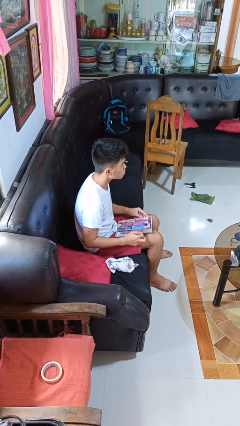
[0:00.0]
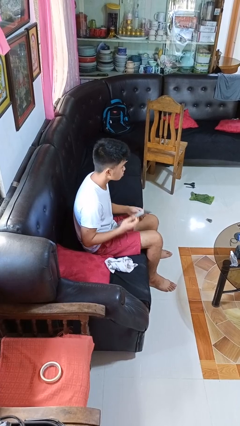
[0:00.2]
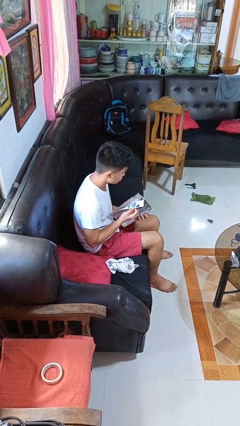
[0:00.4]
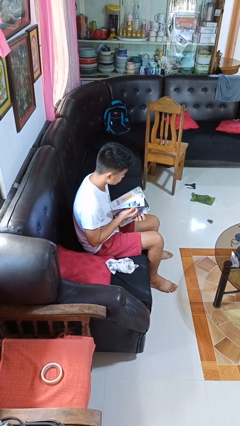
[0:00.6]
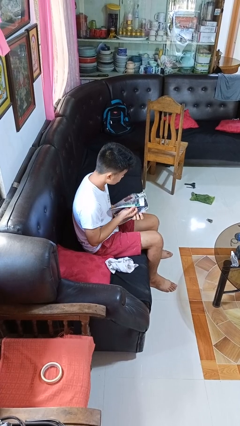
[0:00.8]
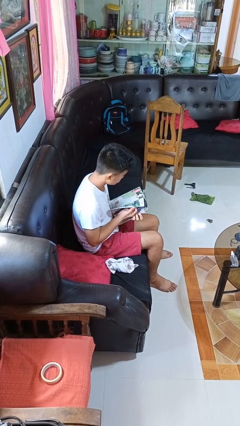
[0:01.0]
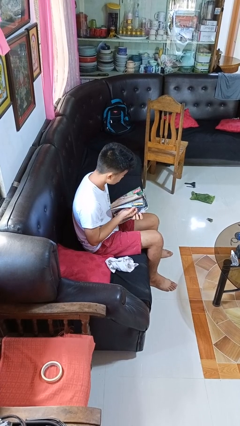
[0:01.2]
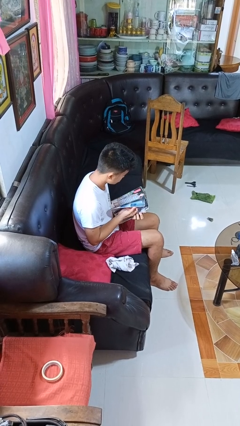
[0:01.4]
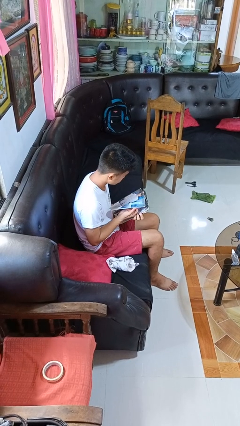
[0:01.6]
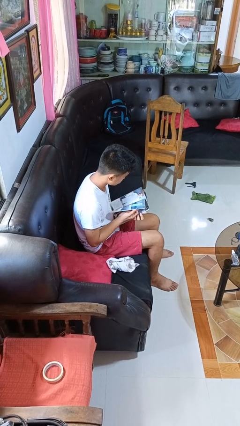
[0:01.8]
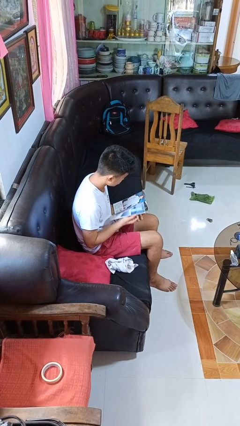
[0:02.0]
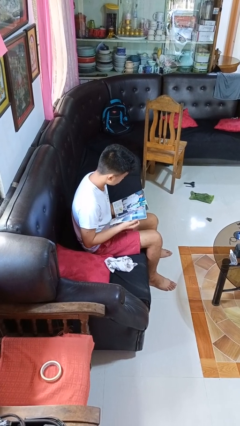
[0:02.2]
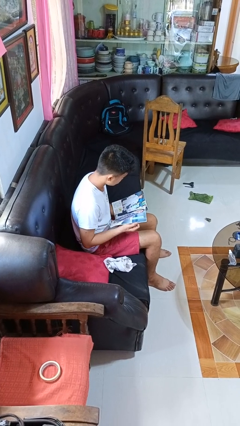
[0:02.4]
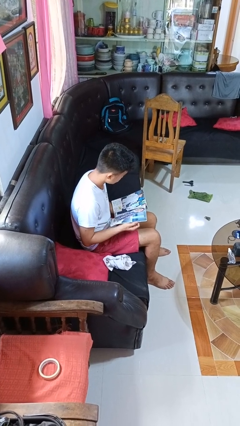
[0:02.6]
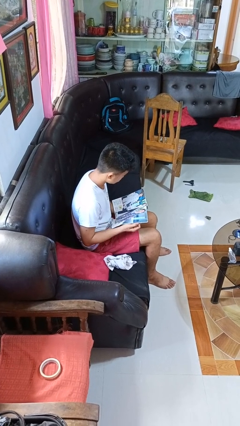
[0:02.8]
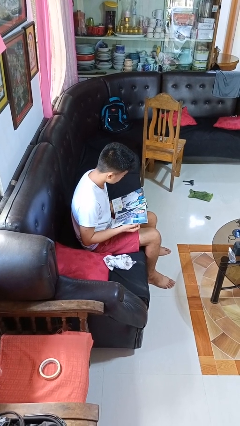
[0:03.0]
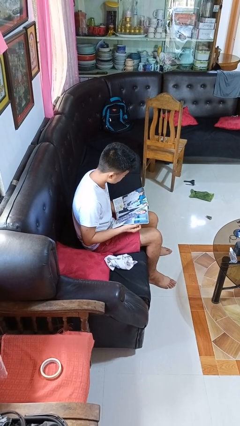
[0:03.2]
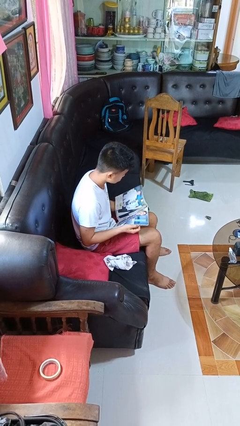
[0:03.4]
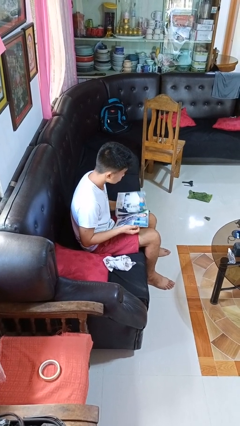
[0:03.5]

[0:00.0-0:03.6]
person reads magazine

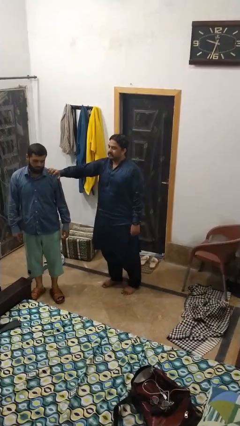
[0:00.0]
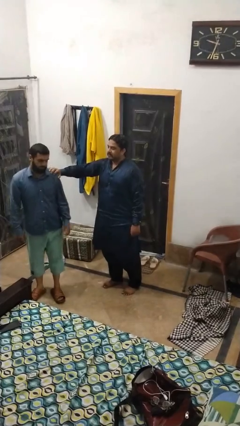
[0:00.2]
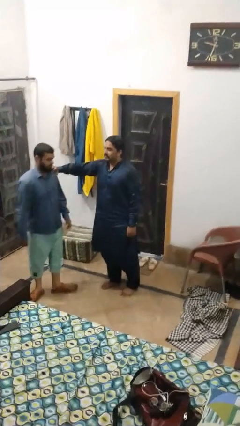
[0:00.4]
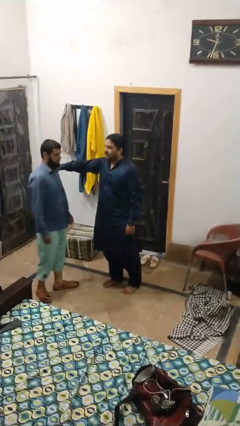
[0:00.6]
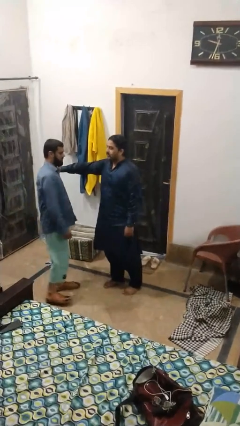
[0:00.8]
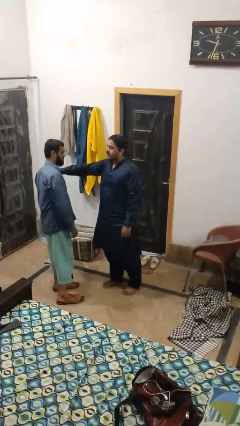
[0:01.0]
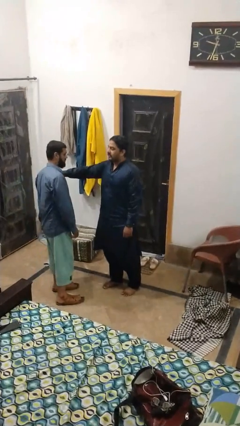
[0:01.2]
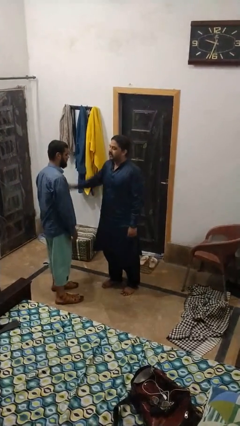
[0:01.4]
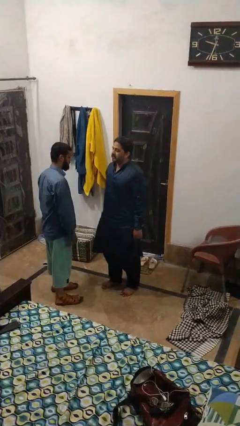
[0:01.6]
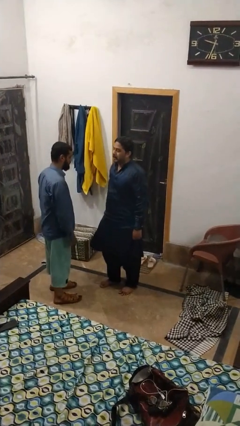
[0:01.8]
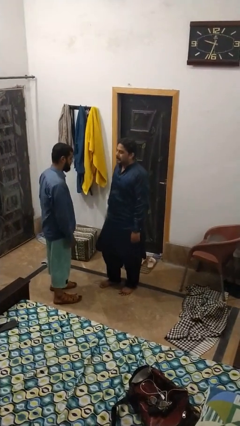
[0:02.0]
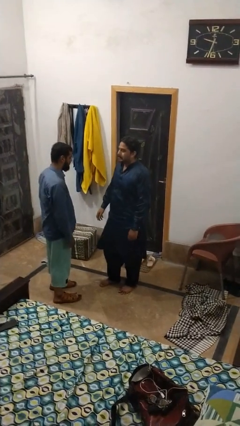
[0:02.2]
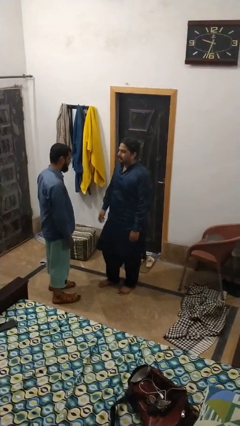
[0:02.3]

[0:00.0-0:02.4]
person spins person around

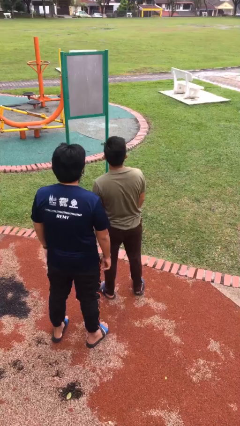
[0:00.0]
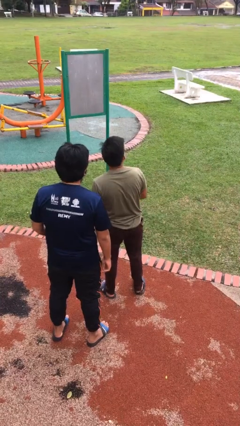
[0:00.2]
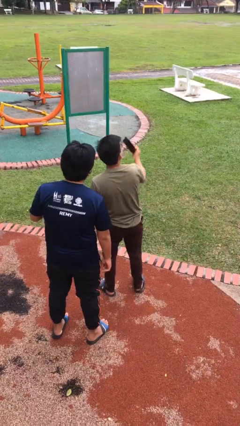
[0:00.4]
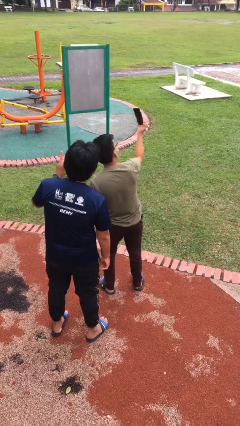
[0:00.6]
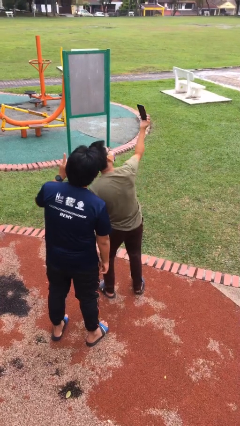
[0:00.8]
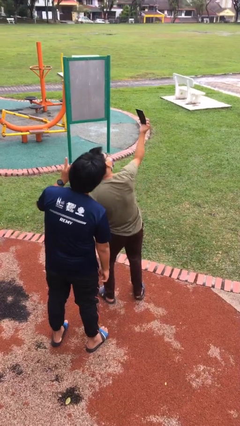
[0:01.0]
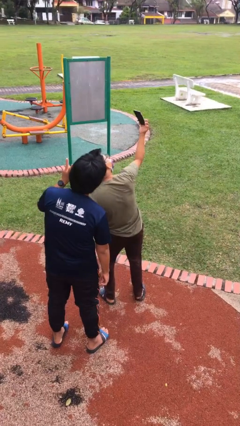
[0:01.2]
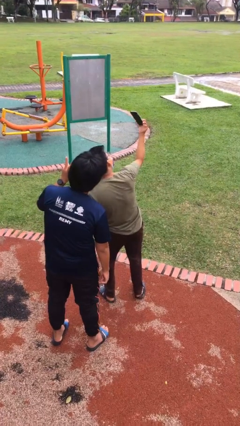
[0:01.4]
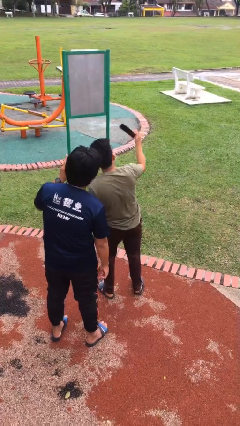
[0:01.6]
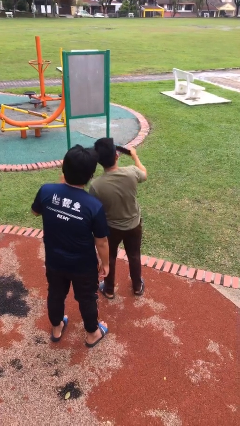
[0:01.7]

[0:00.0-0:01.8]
person takes selfie with person

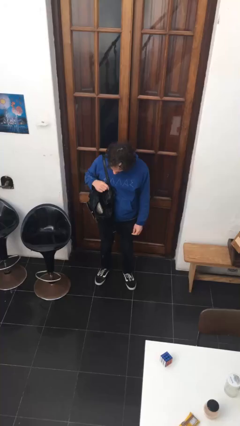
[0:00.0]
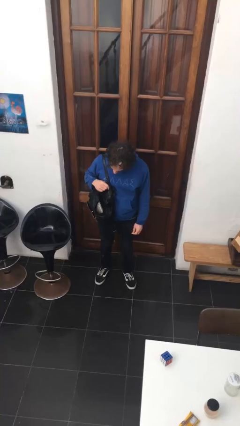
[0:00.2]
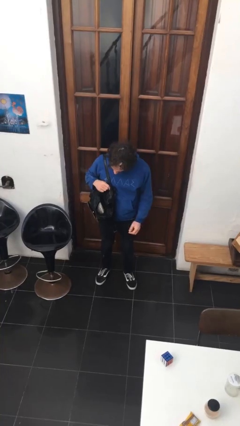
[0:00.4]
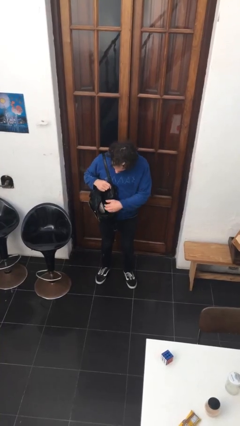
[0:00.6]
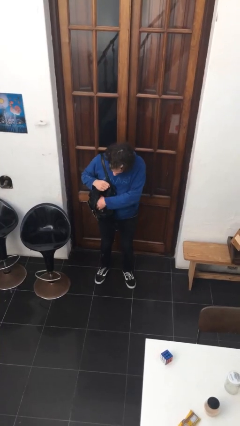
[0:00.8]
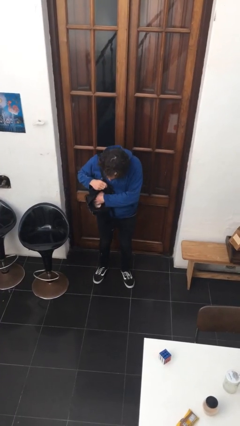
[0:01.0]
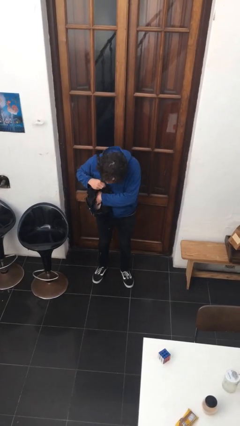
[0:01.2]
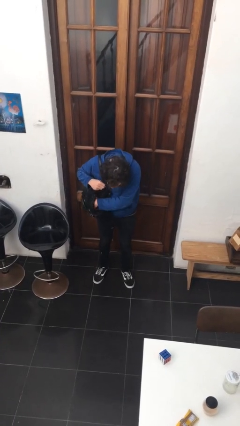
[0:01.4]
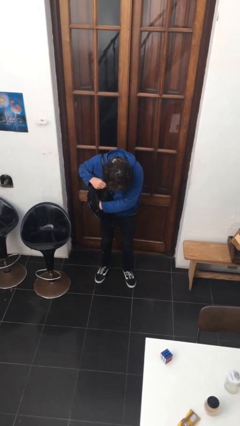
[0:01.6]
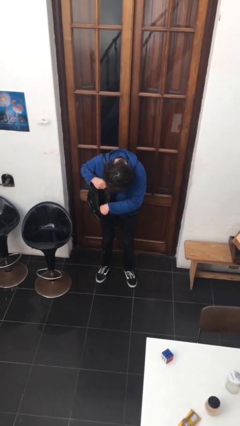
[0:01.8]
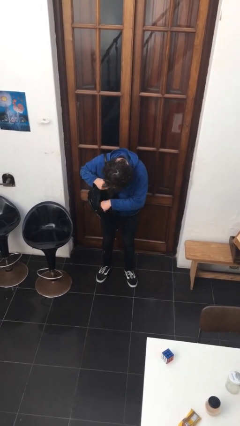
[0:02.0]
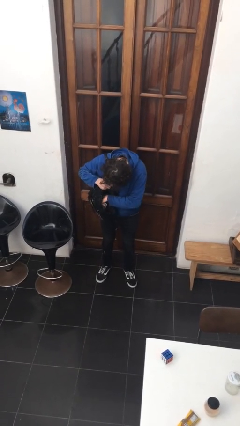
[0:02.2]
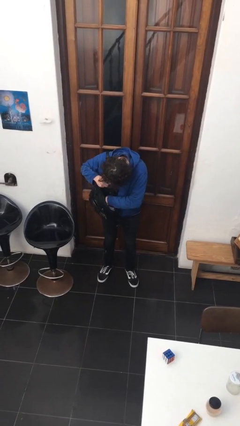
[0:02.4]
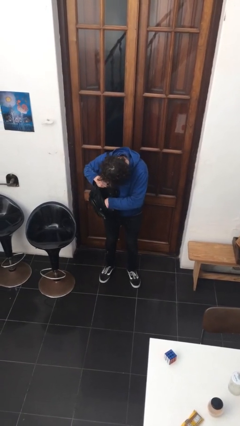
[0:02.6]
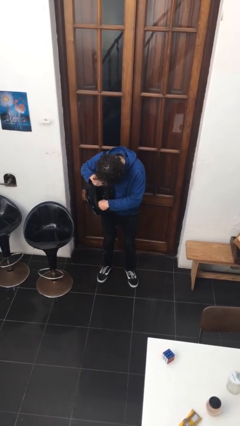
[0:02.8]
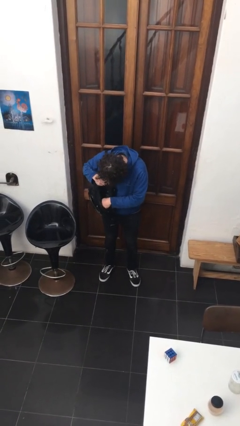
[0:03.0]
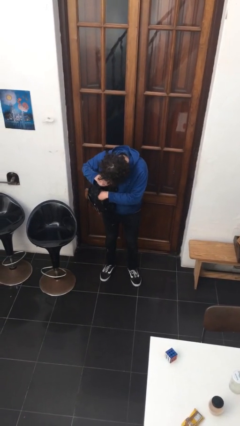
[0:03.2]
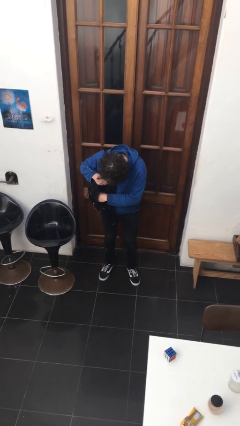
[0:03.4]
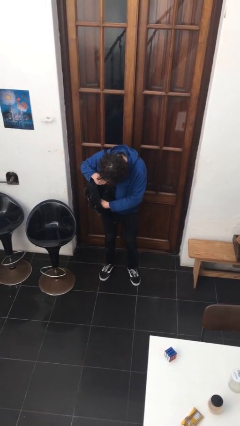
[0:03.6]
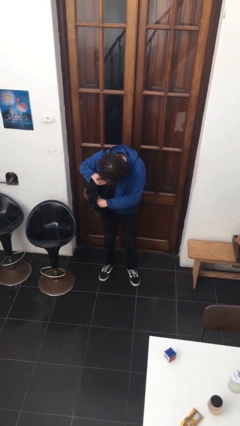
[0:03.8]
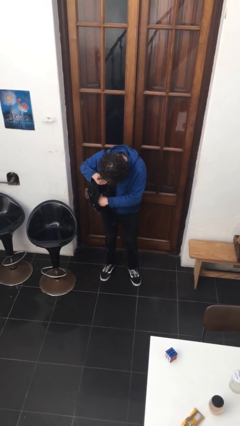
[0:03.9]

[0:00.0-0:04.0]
person searches in purse

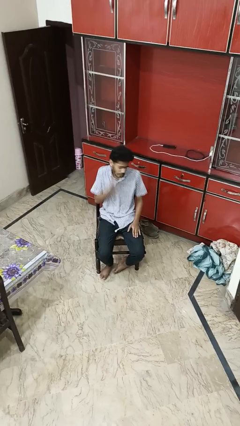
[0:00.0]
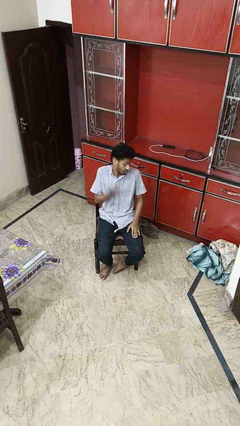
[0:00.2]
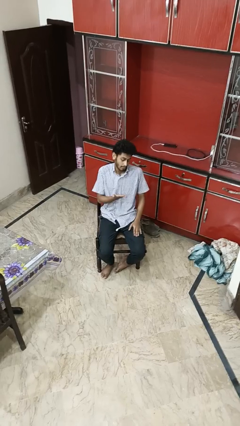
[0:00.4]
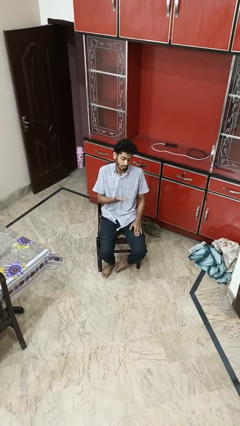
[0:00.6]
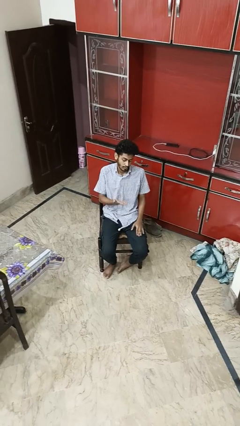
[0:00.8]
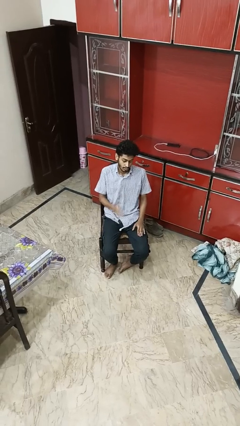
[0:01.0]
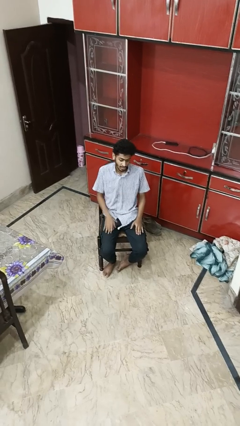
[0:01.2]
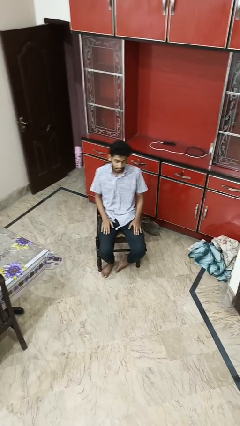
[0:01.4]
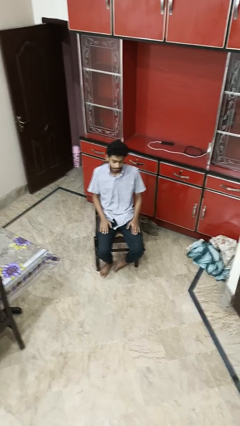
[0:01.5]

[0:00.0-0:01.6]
person swats bug

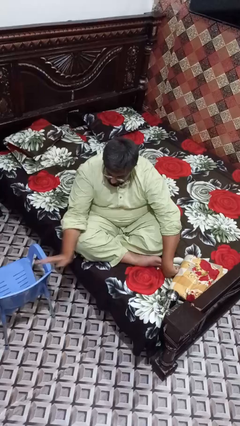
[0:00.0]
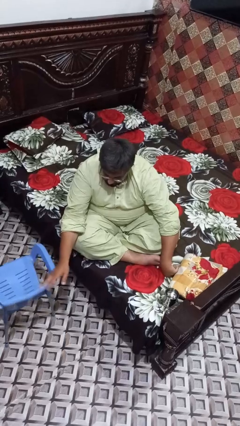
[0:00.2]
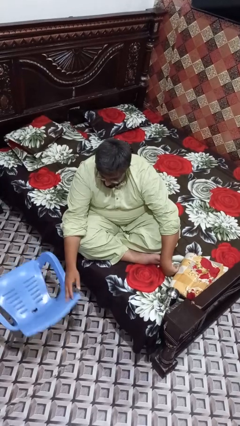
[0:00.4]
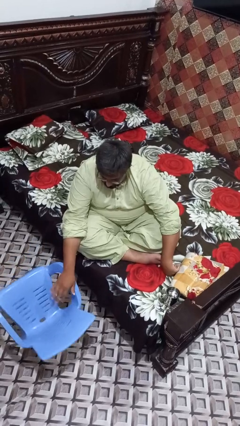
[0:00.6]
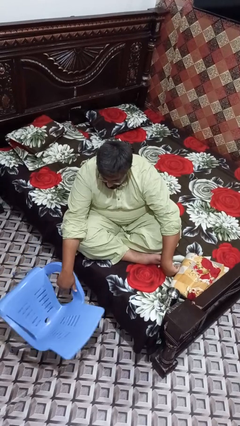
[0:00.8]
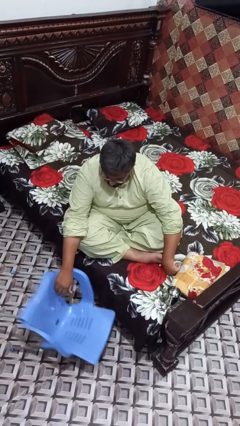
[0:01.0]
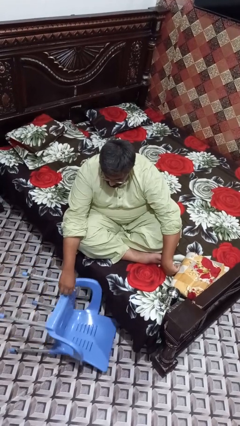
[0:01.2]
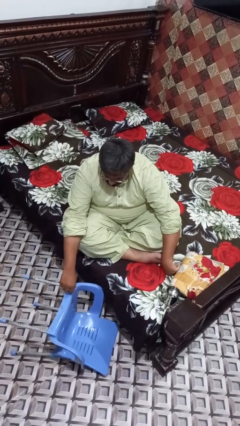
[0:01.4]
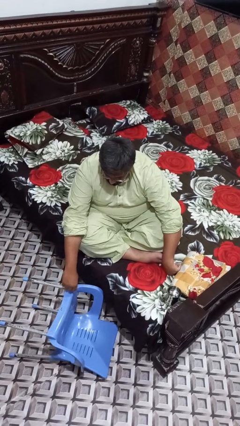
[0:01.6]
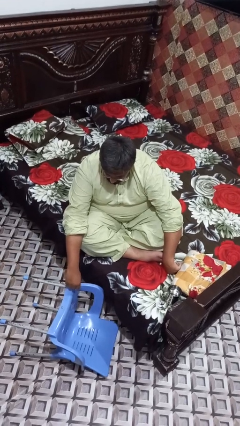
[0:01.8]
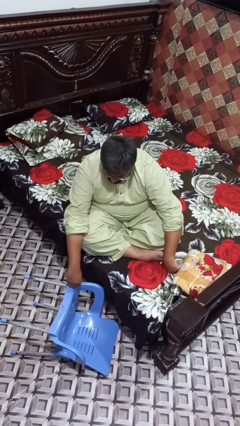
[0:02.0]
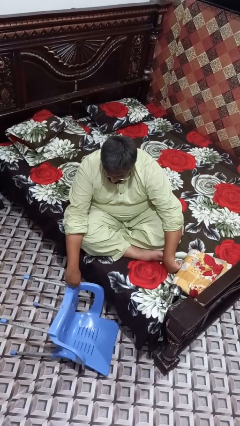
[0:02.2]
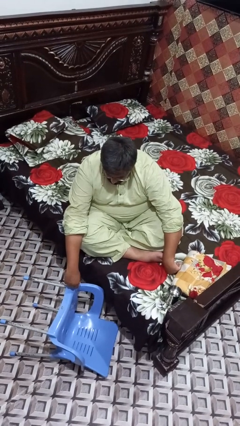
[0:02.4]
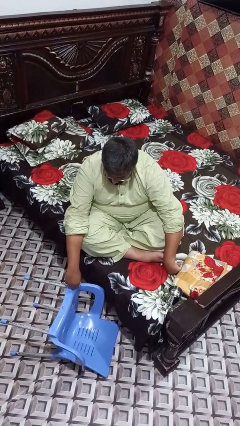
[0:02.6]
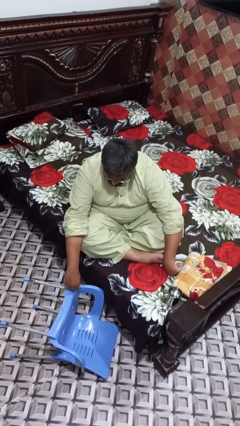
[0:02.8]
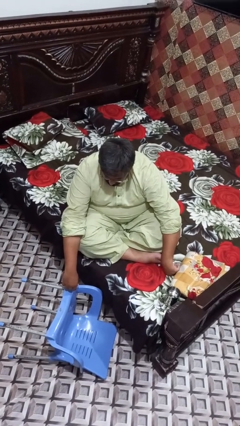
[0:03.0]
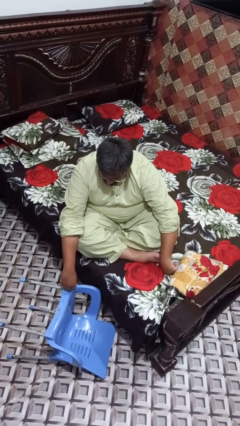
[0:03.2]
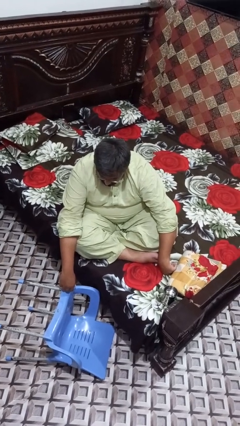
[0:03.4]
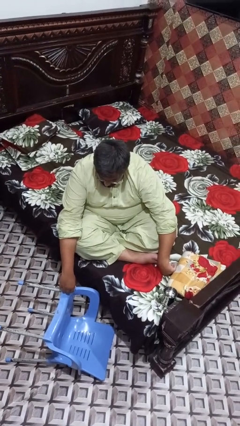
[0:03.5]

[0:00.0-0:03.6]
person knocks over furniture

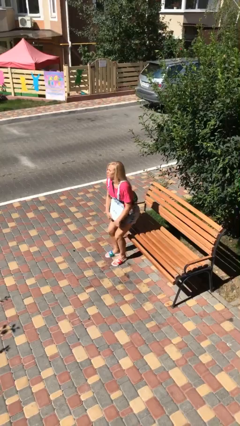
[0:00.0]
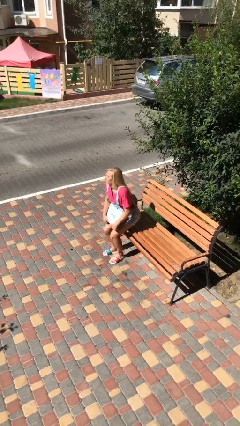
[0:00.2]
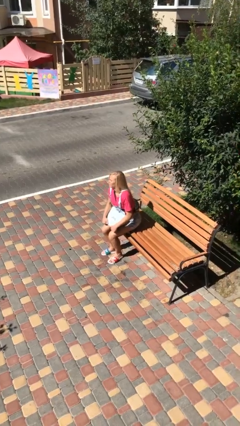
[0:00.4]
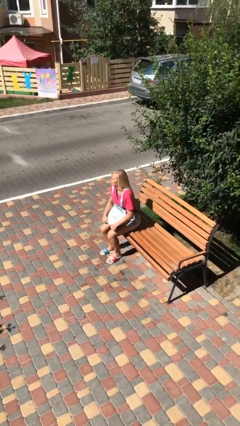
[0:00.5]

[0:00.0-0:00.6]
person sits down
